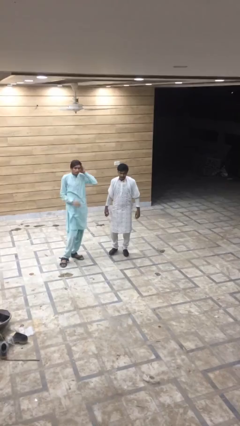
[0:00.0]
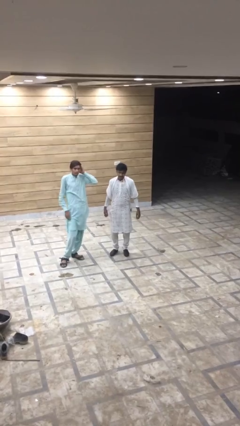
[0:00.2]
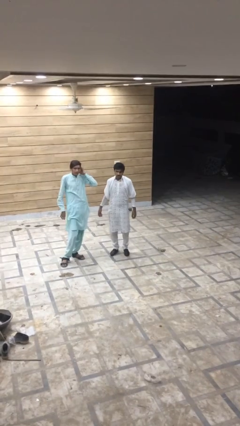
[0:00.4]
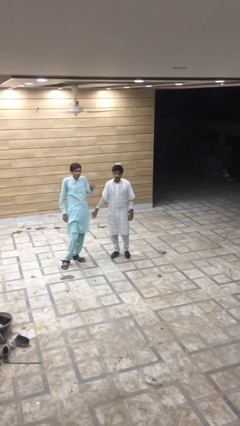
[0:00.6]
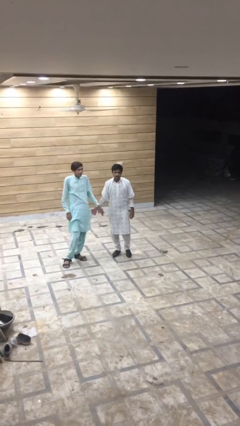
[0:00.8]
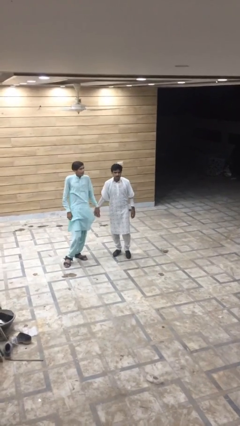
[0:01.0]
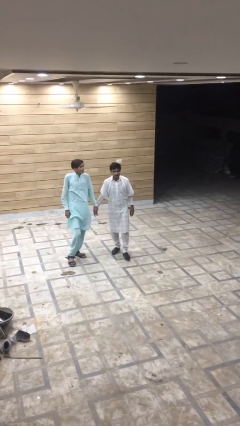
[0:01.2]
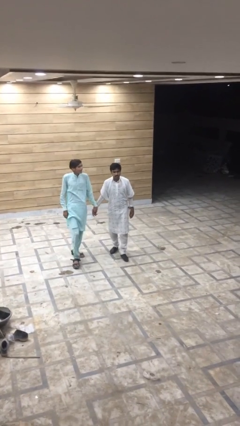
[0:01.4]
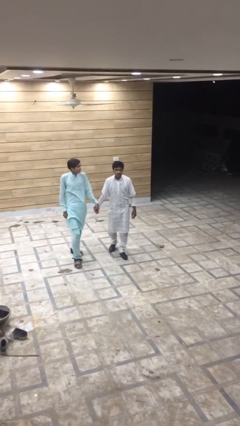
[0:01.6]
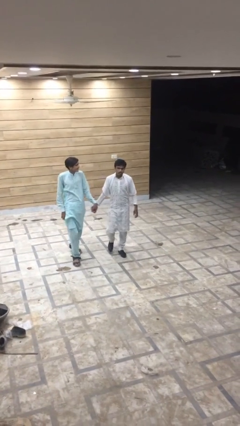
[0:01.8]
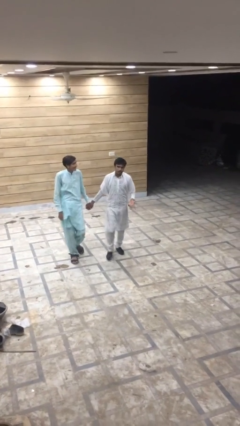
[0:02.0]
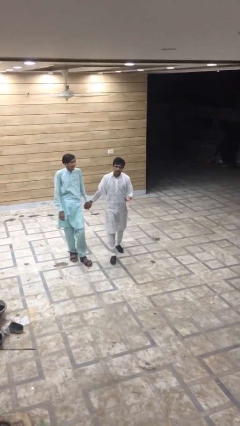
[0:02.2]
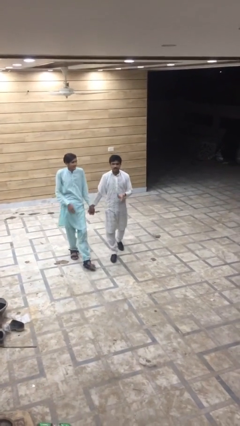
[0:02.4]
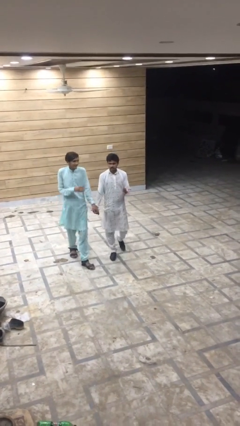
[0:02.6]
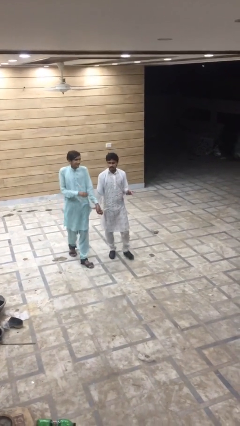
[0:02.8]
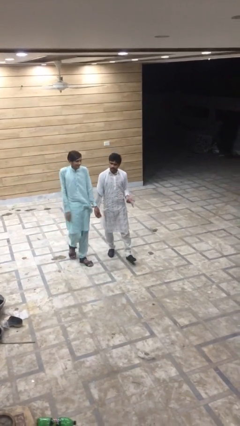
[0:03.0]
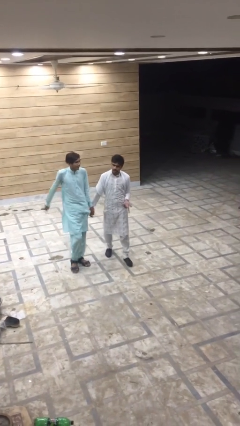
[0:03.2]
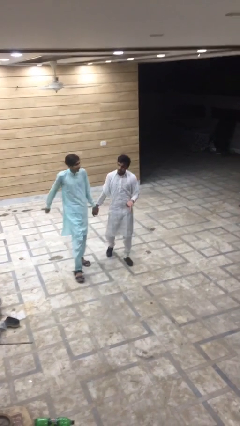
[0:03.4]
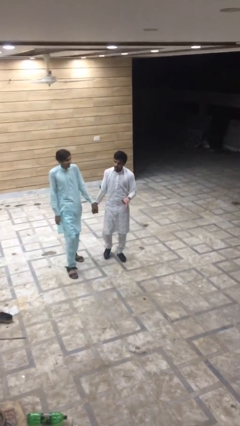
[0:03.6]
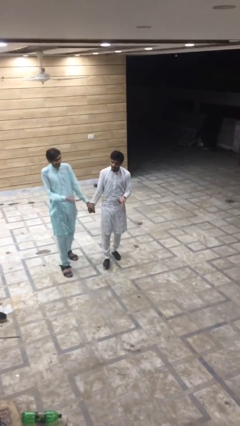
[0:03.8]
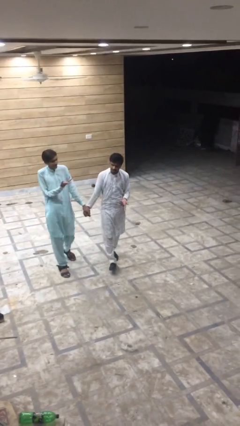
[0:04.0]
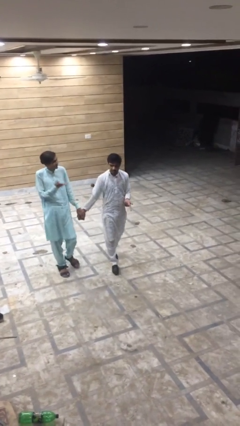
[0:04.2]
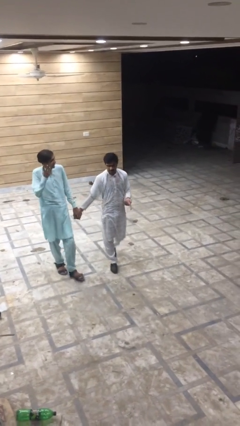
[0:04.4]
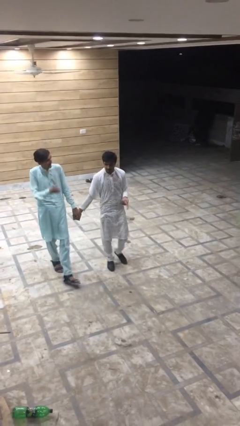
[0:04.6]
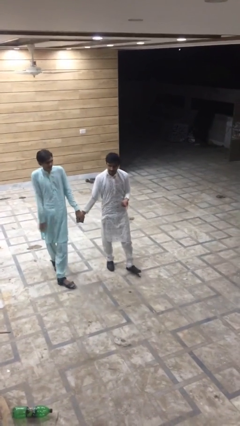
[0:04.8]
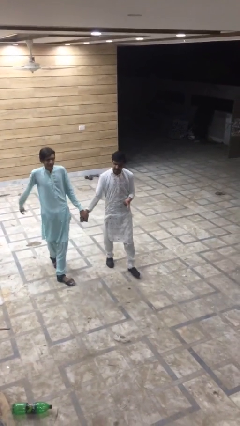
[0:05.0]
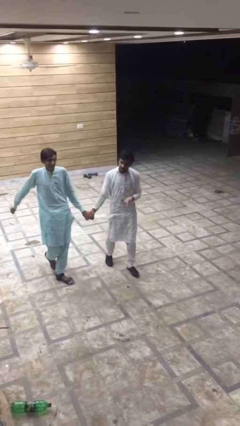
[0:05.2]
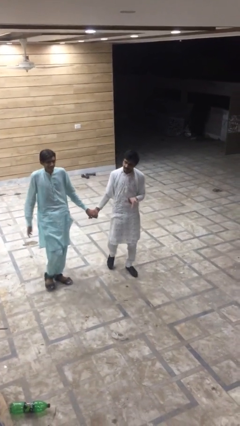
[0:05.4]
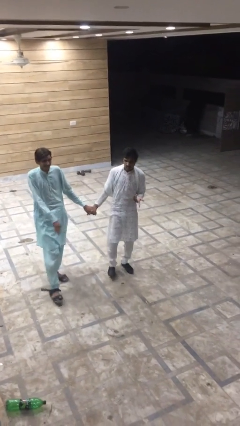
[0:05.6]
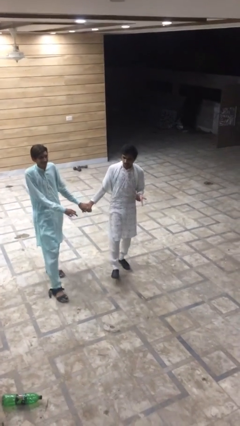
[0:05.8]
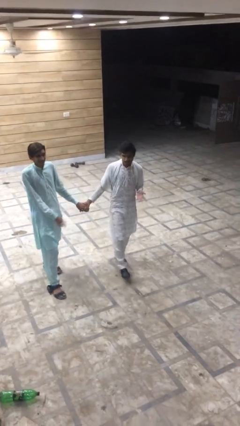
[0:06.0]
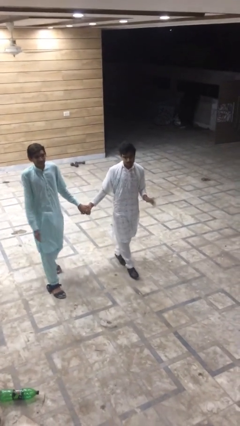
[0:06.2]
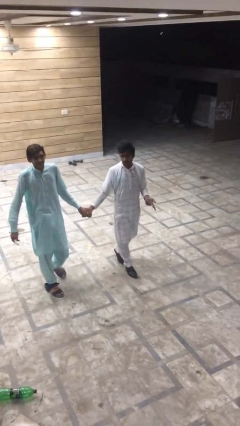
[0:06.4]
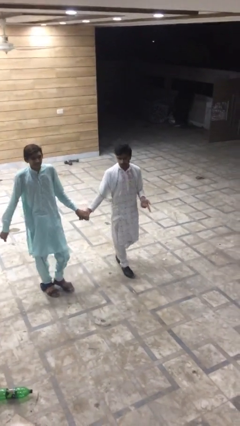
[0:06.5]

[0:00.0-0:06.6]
person holds hand

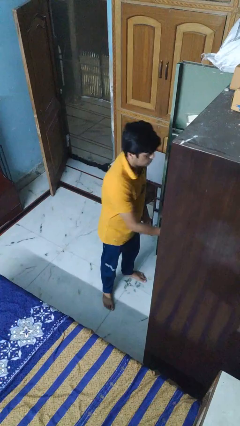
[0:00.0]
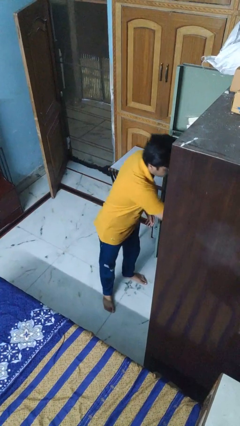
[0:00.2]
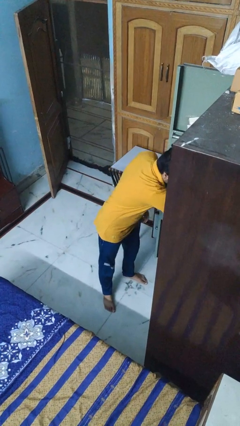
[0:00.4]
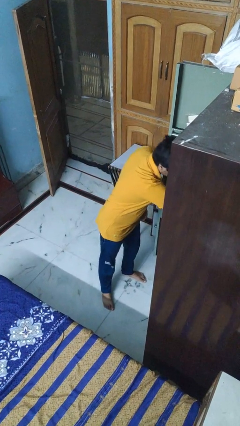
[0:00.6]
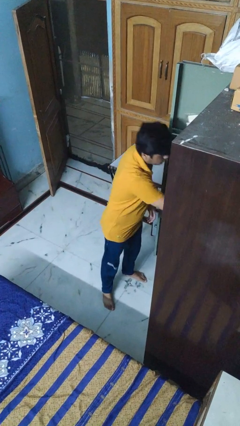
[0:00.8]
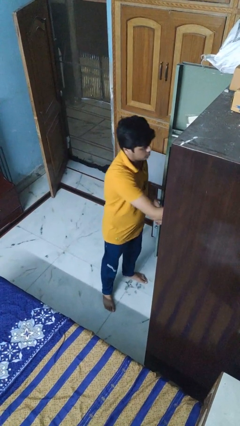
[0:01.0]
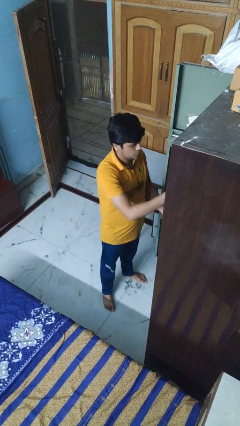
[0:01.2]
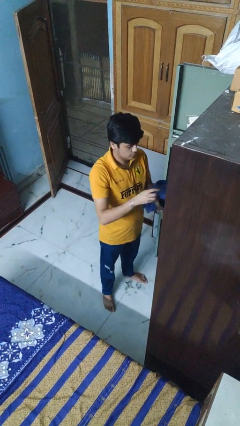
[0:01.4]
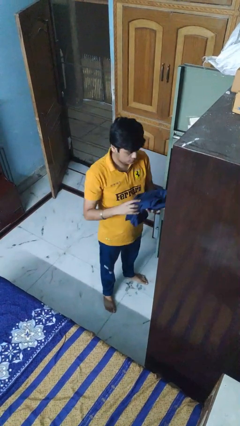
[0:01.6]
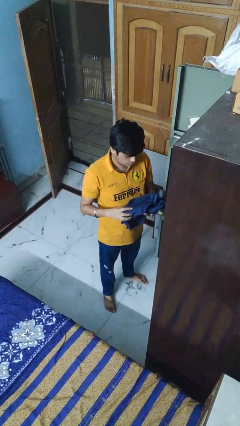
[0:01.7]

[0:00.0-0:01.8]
person takes clothes from dresser

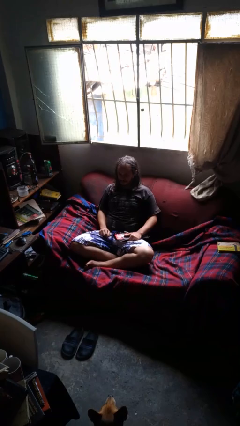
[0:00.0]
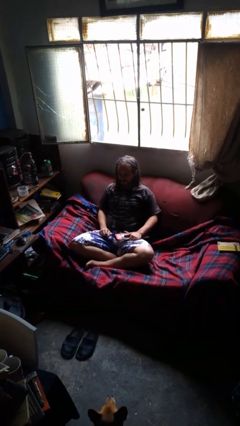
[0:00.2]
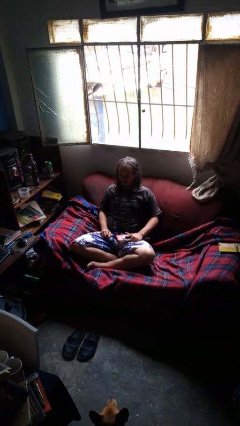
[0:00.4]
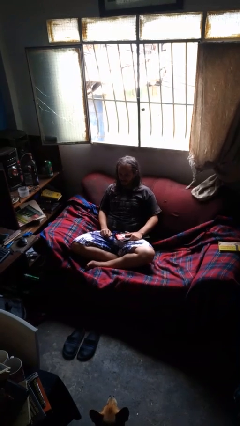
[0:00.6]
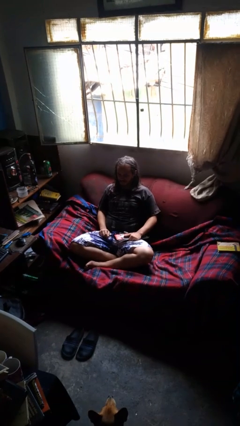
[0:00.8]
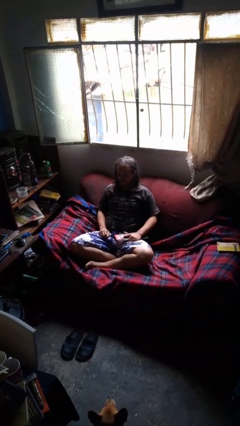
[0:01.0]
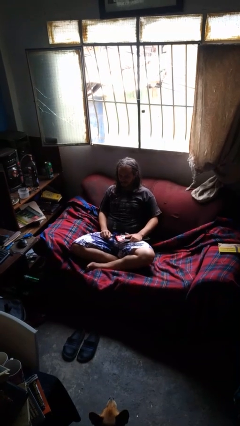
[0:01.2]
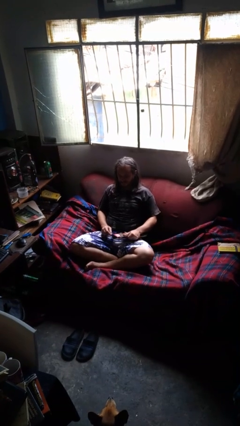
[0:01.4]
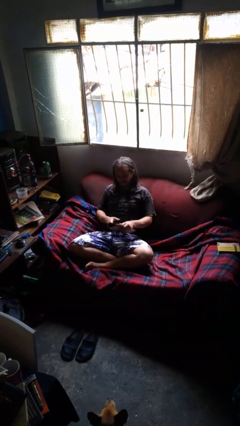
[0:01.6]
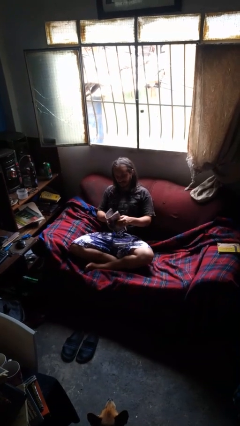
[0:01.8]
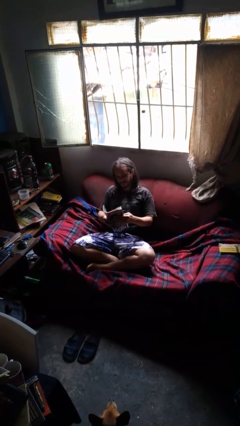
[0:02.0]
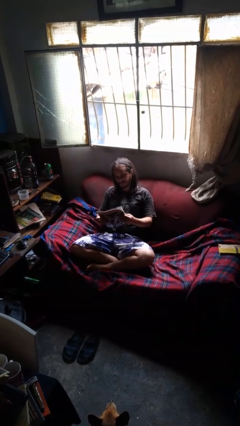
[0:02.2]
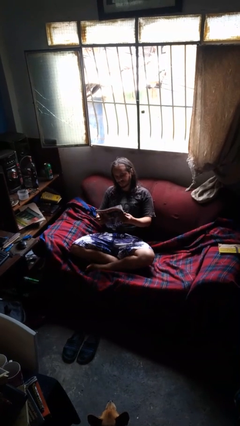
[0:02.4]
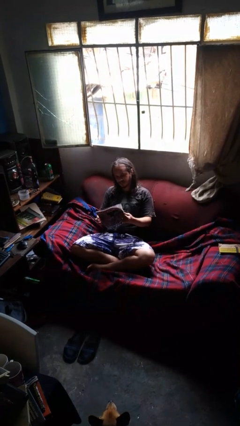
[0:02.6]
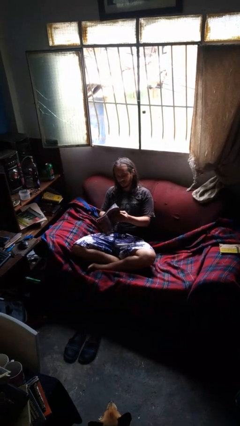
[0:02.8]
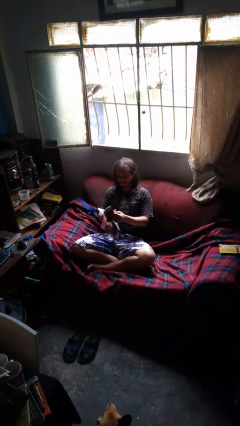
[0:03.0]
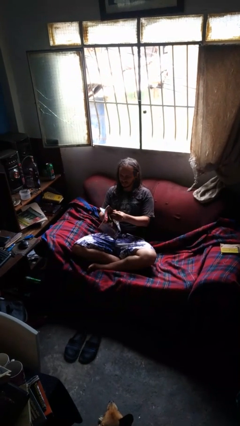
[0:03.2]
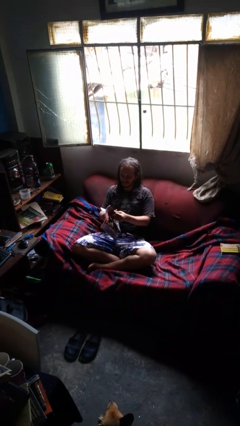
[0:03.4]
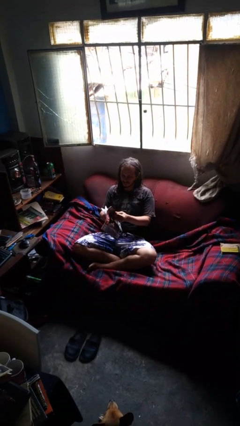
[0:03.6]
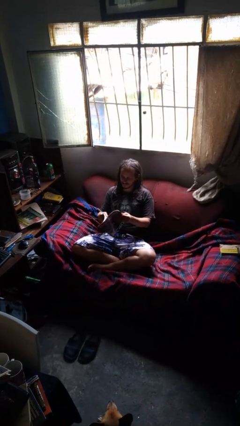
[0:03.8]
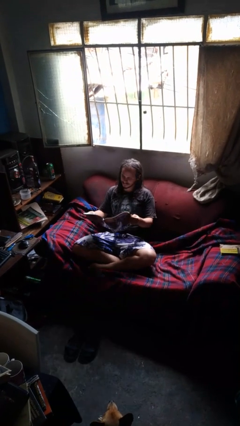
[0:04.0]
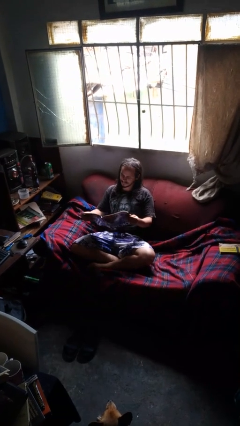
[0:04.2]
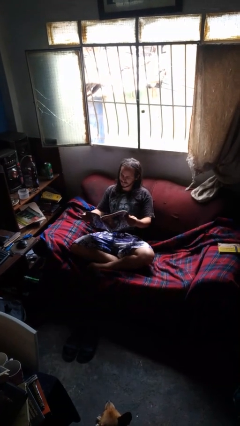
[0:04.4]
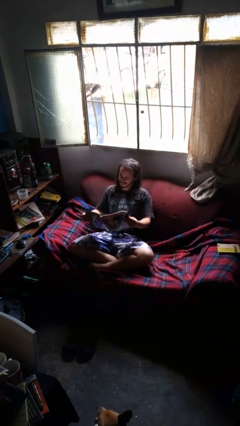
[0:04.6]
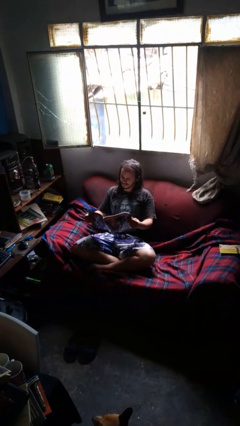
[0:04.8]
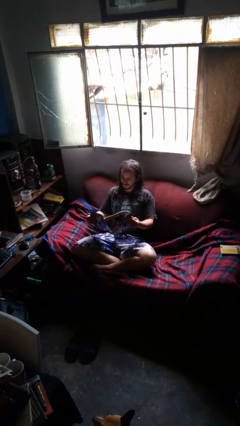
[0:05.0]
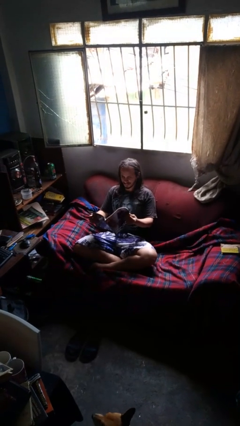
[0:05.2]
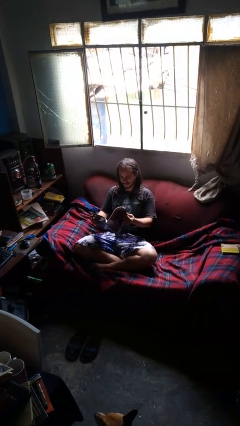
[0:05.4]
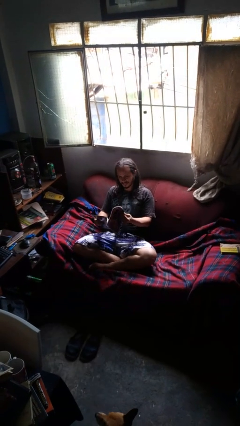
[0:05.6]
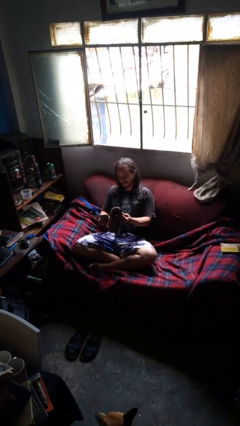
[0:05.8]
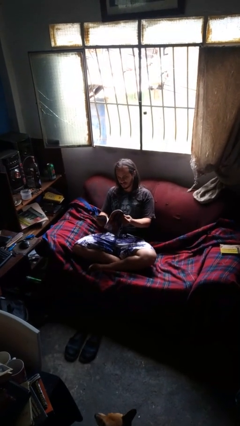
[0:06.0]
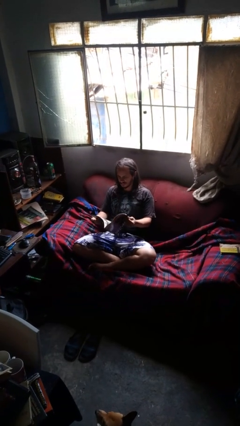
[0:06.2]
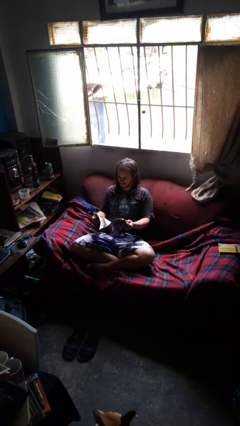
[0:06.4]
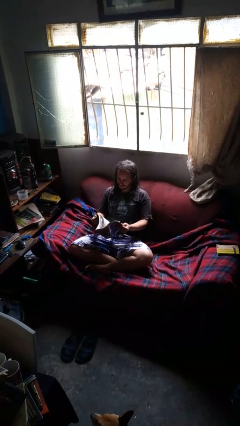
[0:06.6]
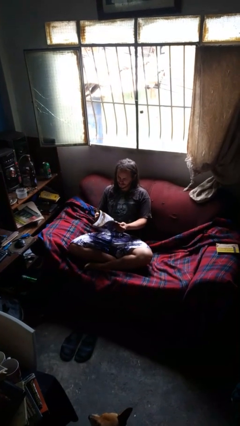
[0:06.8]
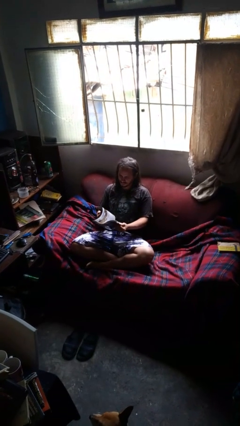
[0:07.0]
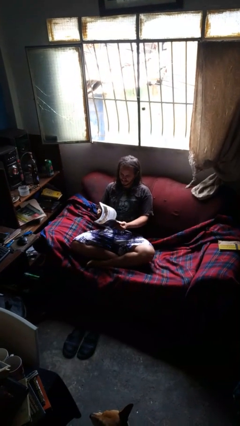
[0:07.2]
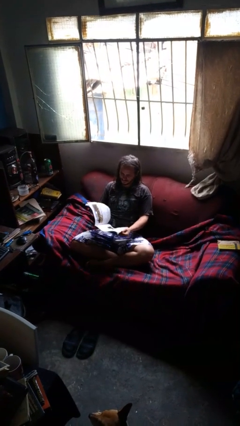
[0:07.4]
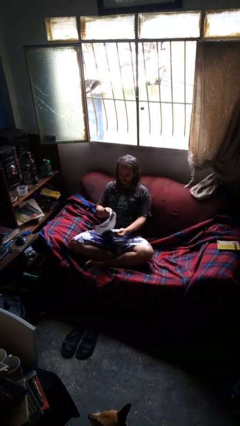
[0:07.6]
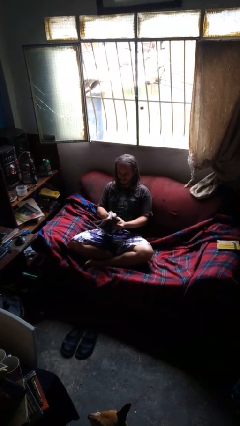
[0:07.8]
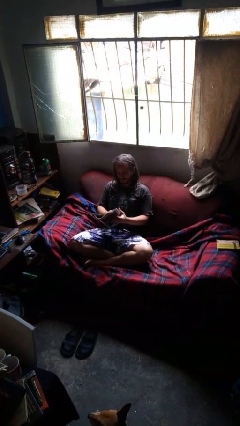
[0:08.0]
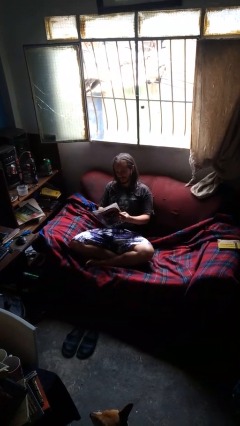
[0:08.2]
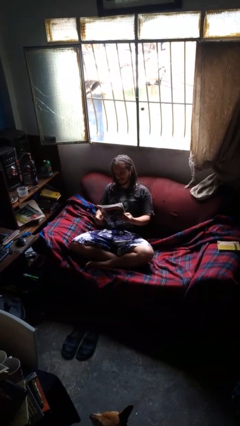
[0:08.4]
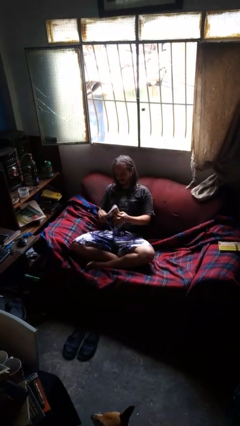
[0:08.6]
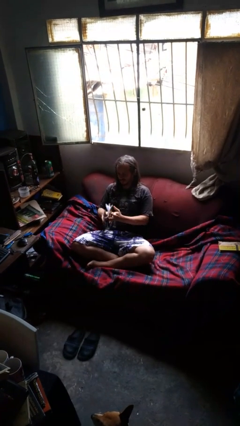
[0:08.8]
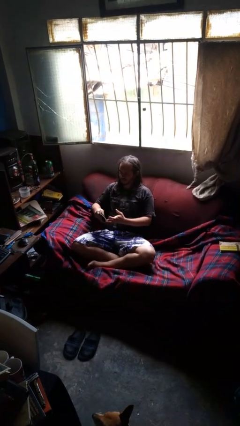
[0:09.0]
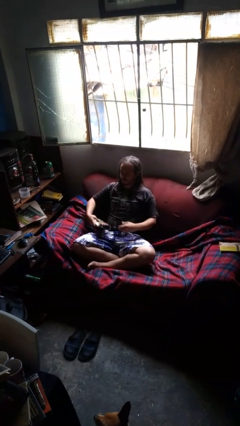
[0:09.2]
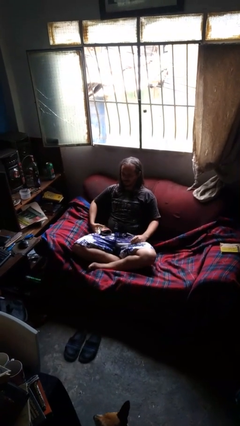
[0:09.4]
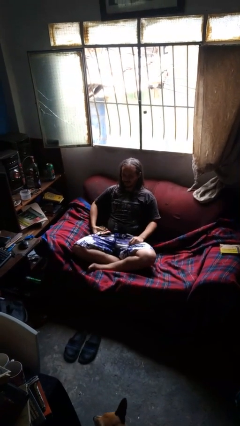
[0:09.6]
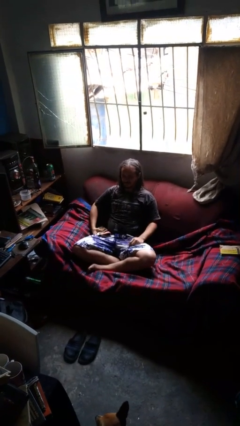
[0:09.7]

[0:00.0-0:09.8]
person reads magazine
